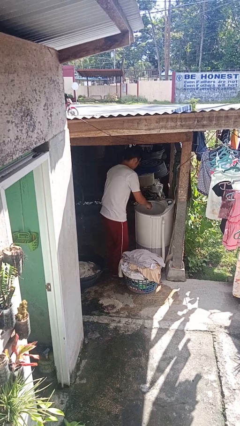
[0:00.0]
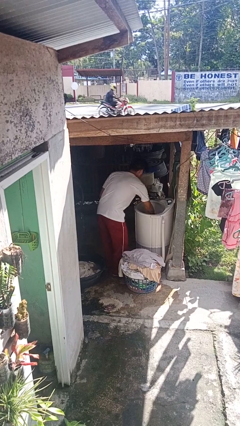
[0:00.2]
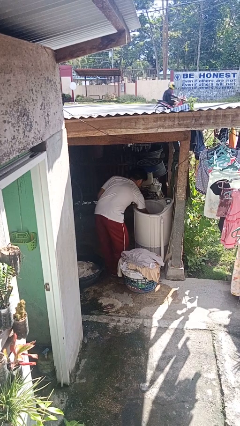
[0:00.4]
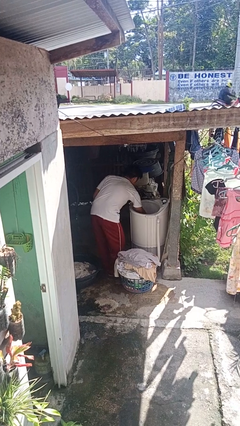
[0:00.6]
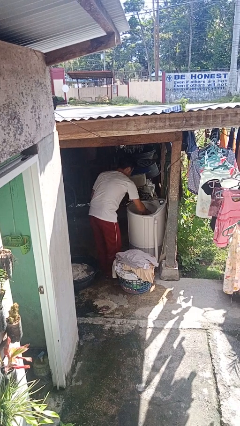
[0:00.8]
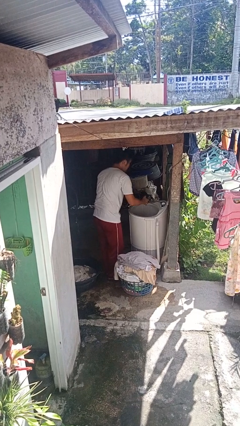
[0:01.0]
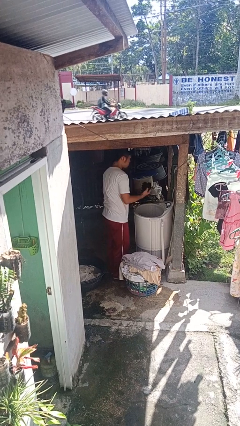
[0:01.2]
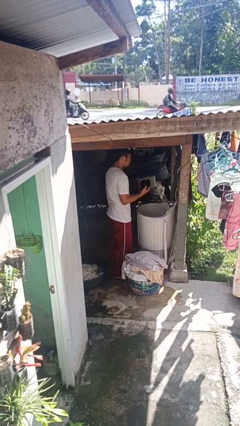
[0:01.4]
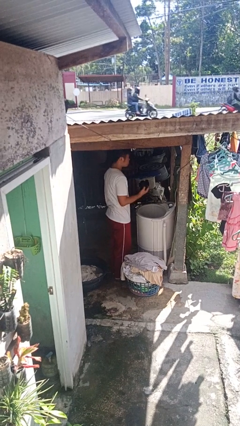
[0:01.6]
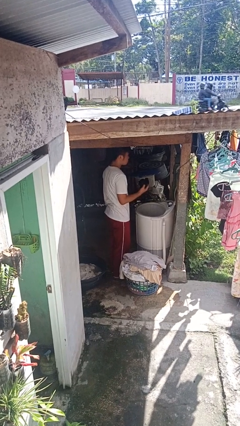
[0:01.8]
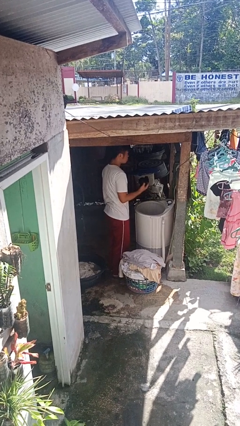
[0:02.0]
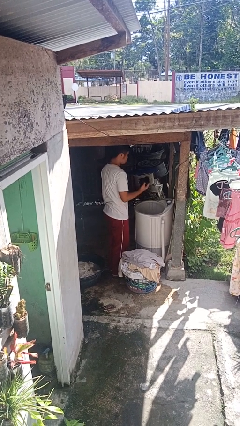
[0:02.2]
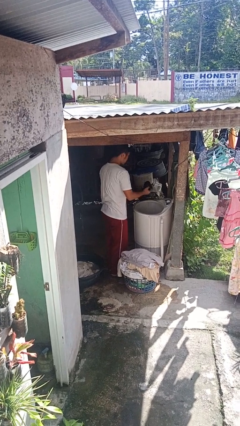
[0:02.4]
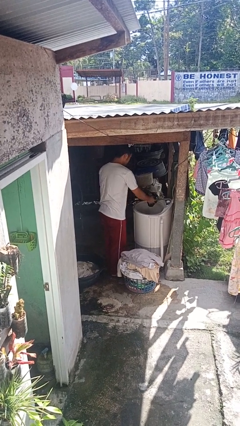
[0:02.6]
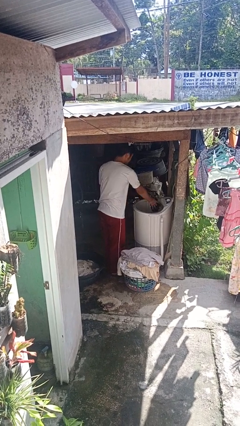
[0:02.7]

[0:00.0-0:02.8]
person unloads clotheswasher

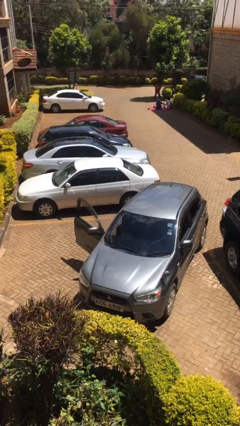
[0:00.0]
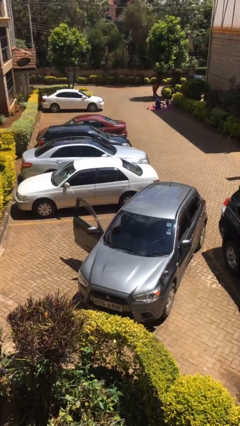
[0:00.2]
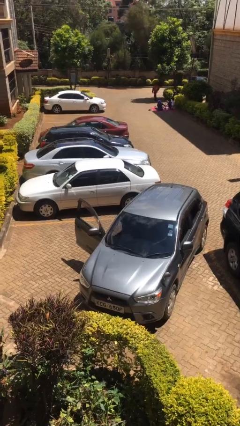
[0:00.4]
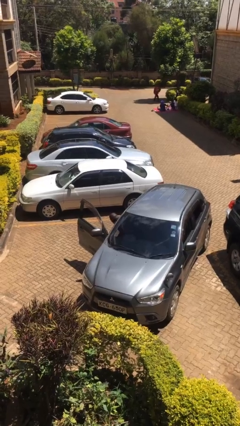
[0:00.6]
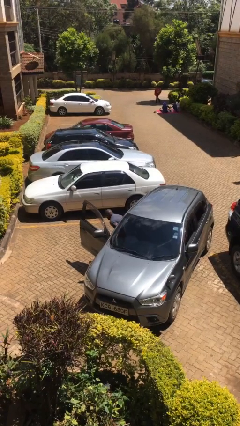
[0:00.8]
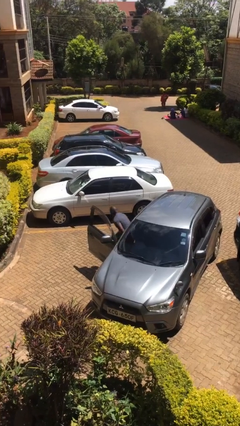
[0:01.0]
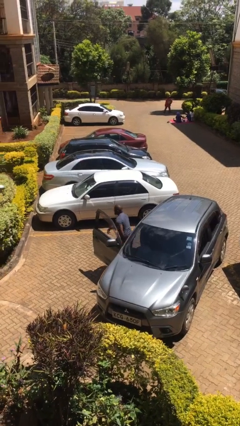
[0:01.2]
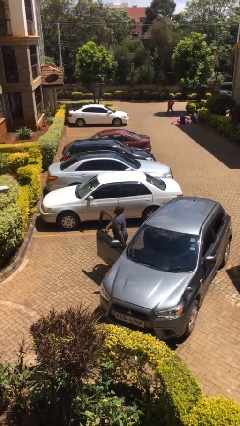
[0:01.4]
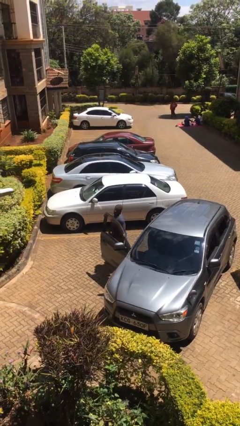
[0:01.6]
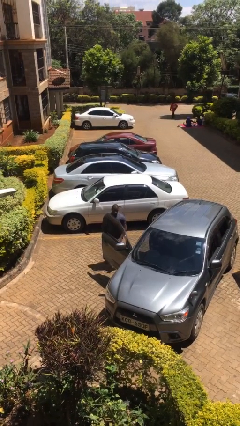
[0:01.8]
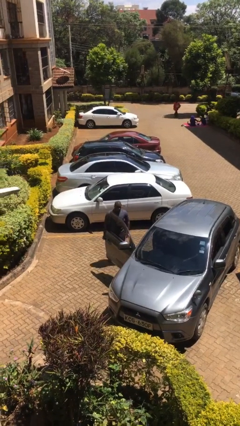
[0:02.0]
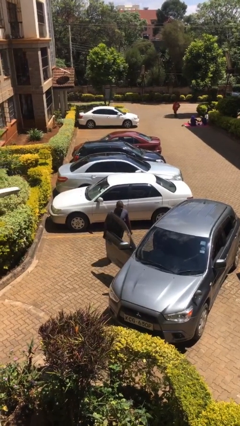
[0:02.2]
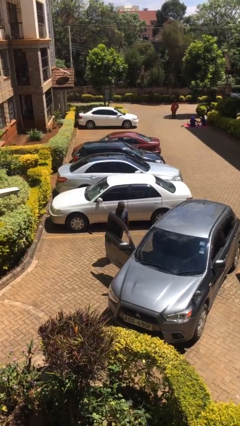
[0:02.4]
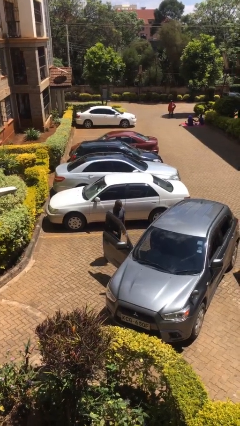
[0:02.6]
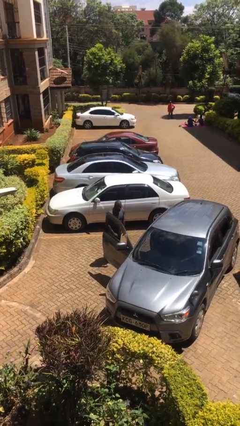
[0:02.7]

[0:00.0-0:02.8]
person exits car

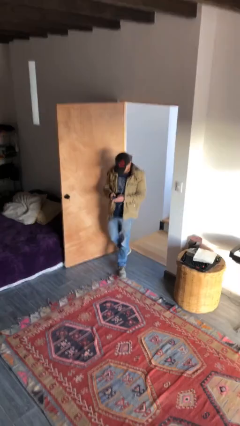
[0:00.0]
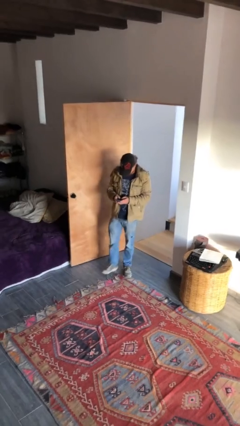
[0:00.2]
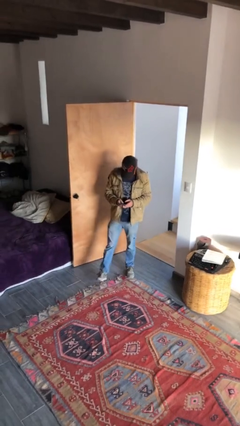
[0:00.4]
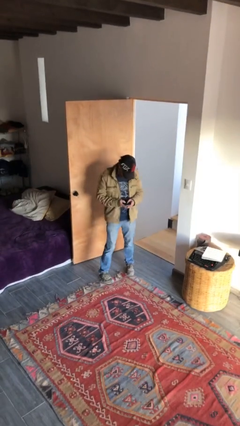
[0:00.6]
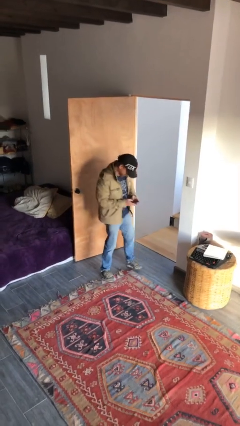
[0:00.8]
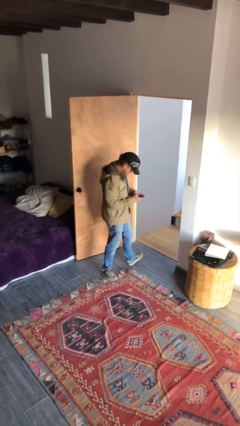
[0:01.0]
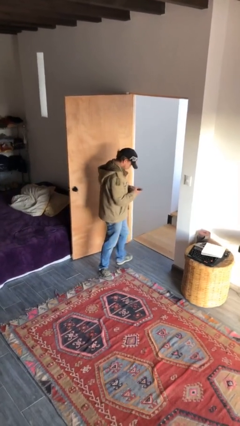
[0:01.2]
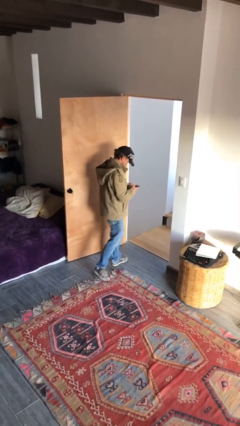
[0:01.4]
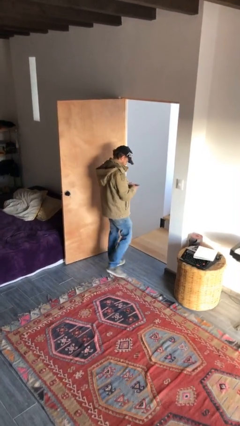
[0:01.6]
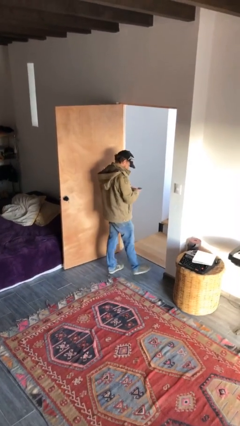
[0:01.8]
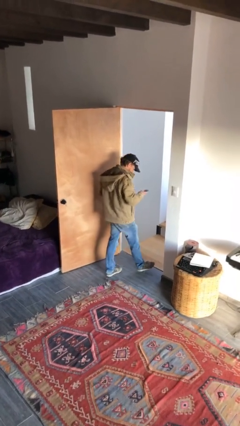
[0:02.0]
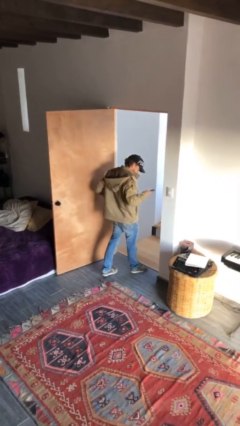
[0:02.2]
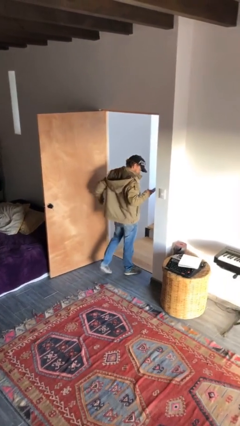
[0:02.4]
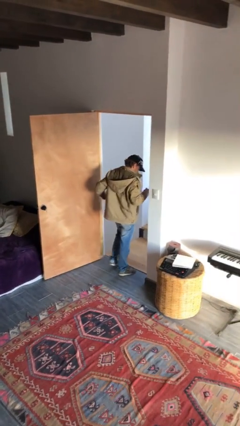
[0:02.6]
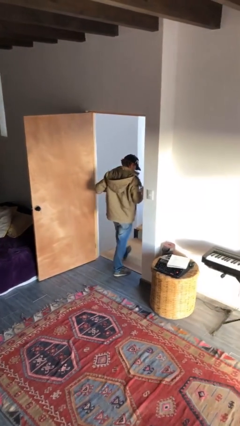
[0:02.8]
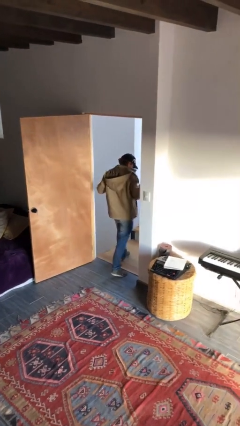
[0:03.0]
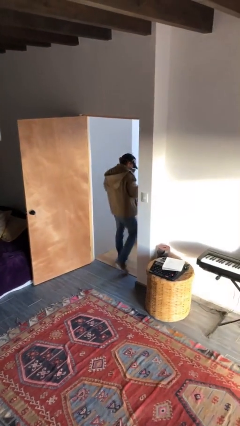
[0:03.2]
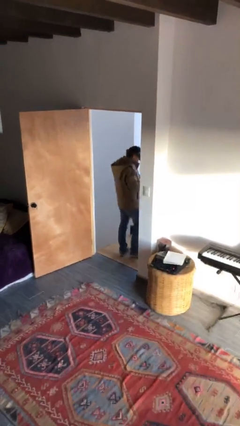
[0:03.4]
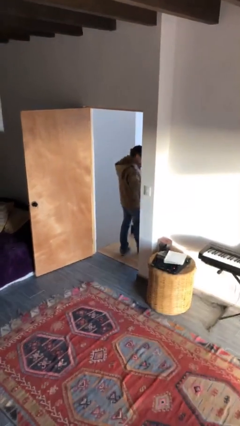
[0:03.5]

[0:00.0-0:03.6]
person exits scene through structure

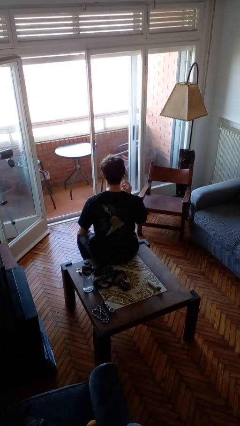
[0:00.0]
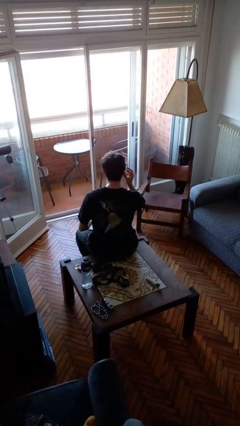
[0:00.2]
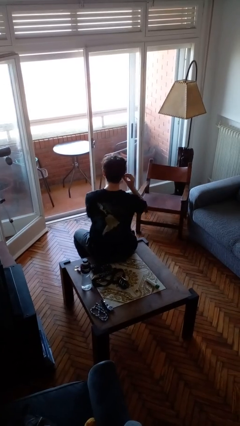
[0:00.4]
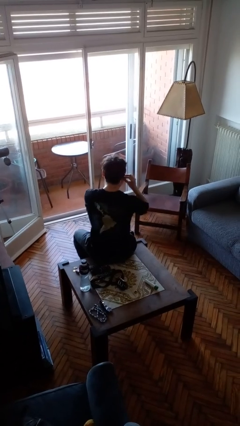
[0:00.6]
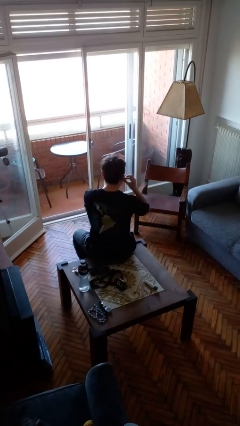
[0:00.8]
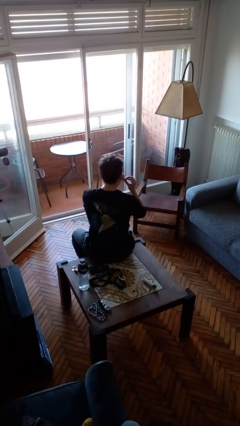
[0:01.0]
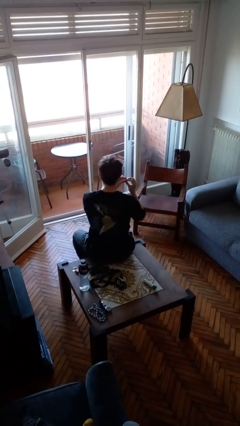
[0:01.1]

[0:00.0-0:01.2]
person takes off earrings

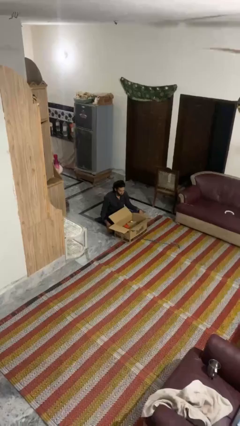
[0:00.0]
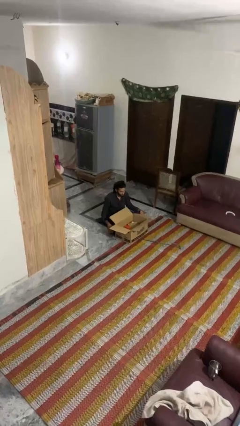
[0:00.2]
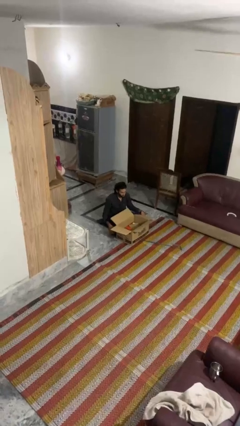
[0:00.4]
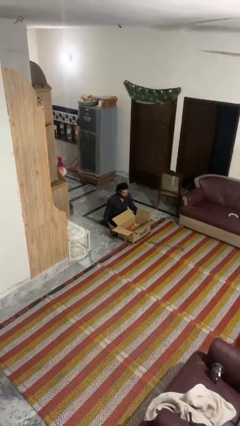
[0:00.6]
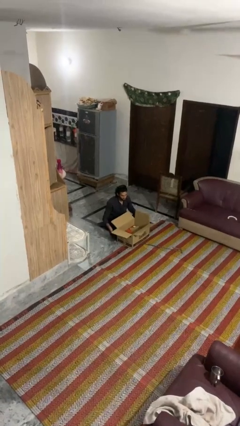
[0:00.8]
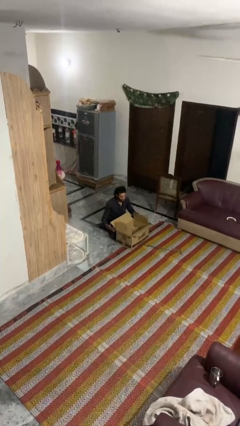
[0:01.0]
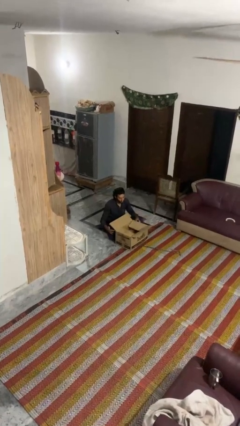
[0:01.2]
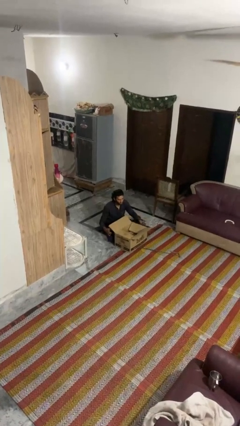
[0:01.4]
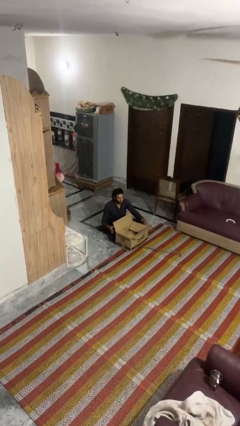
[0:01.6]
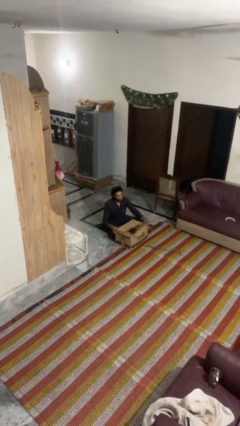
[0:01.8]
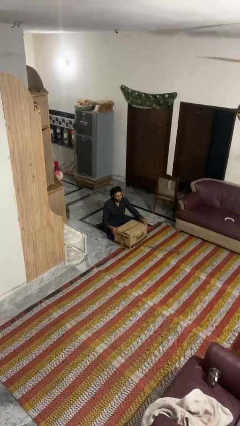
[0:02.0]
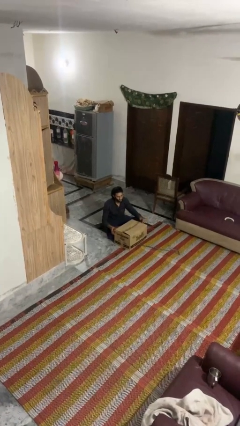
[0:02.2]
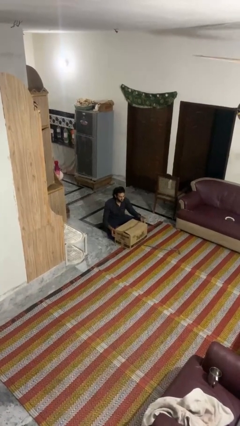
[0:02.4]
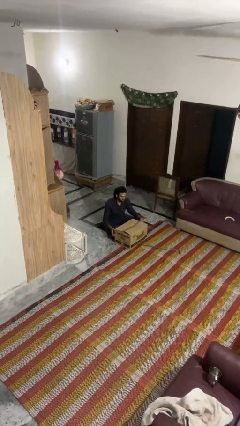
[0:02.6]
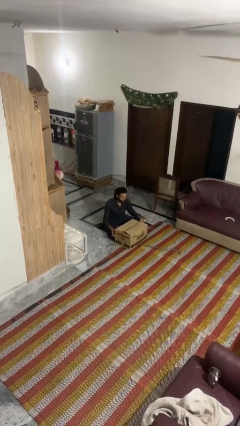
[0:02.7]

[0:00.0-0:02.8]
person closes box

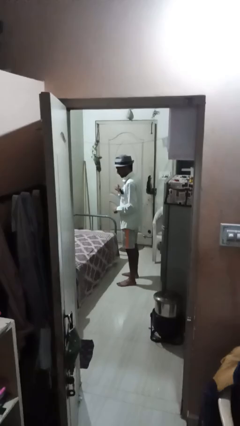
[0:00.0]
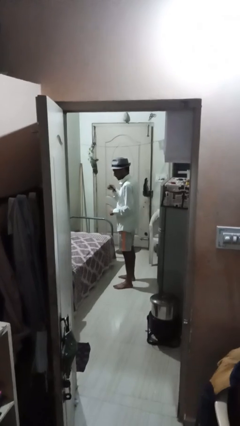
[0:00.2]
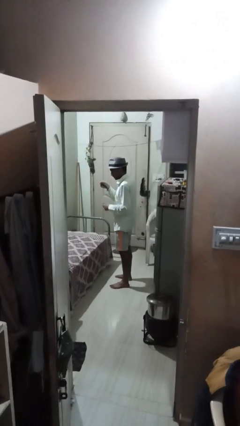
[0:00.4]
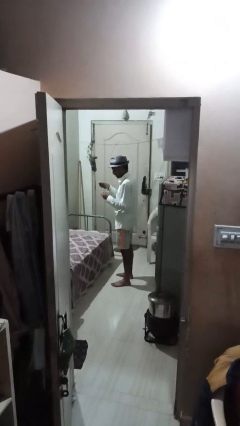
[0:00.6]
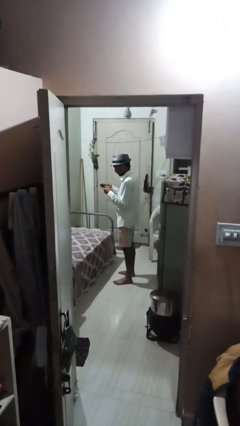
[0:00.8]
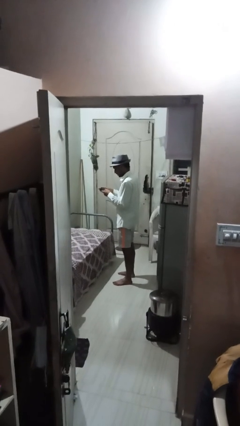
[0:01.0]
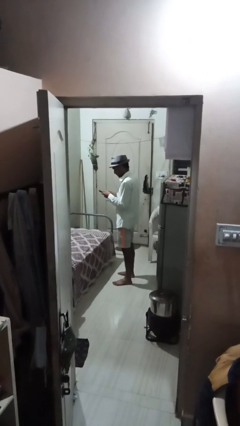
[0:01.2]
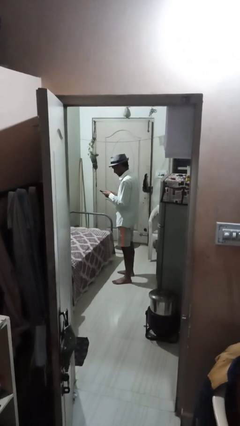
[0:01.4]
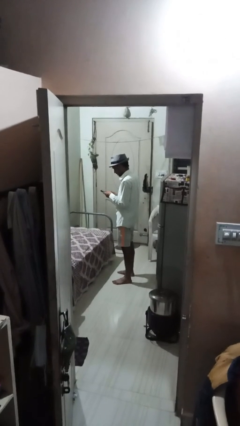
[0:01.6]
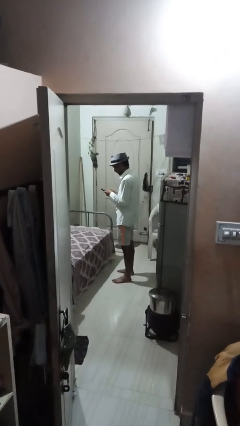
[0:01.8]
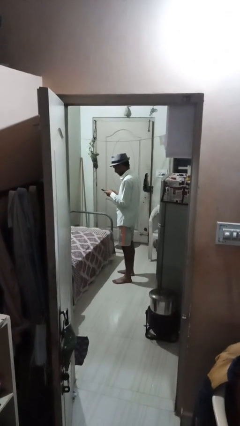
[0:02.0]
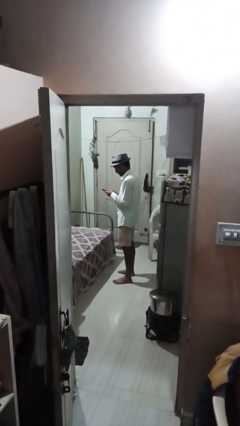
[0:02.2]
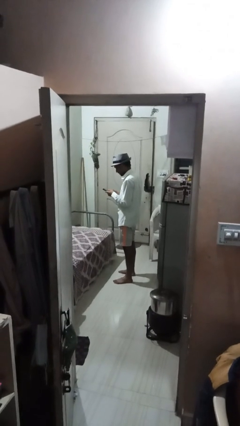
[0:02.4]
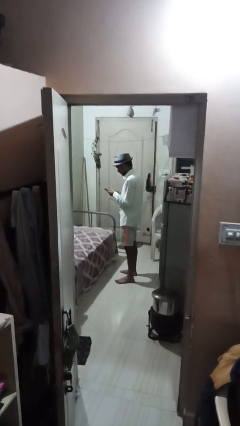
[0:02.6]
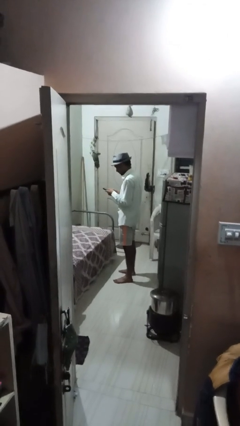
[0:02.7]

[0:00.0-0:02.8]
person takes phone from pocket

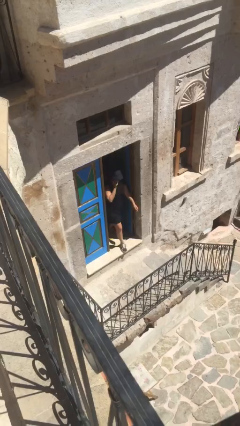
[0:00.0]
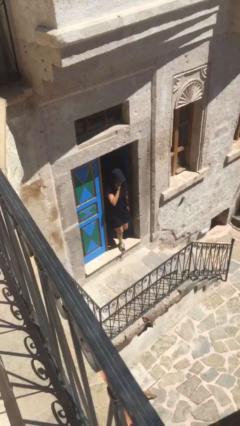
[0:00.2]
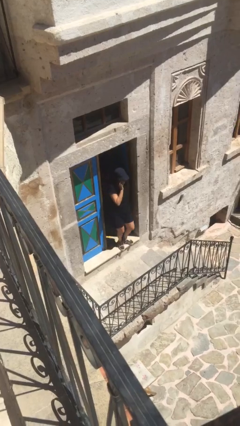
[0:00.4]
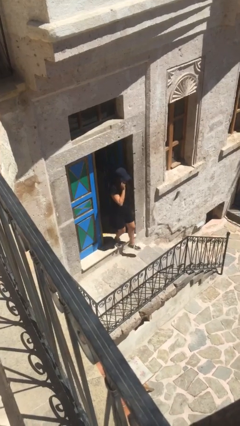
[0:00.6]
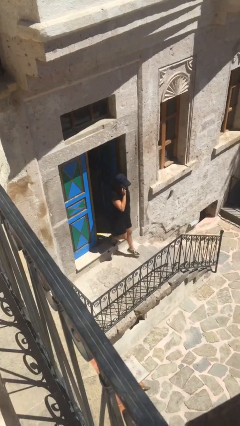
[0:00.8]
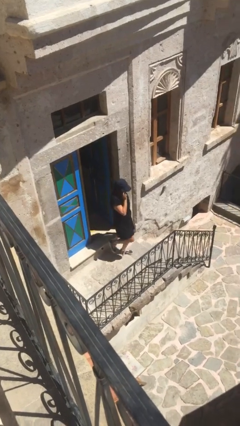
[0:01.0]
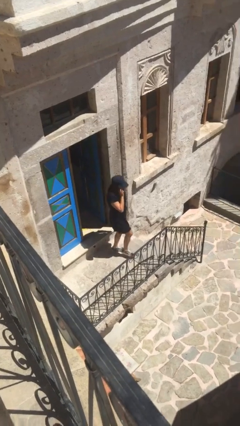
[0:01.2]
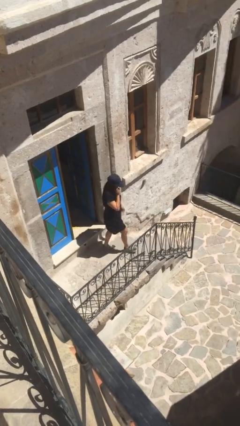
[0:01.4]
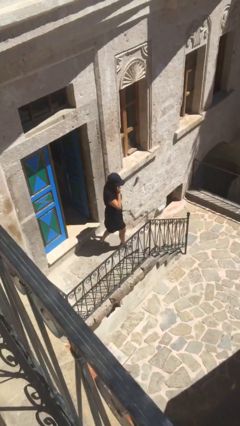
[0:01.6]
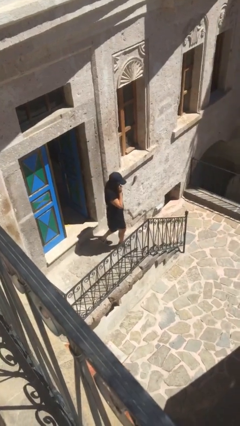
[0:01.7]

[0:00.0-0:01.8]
person enters scene through structure
